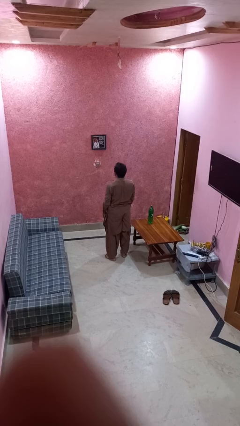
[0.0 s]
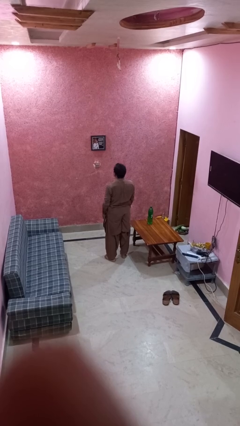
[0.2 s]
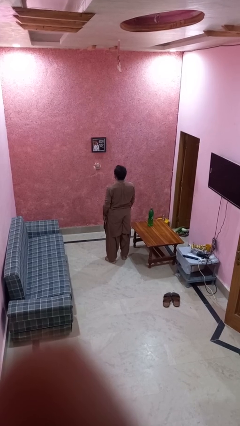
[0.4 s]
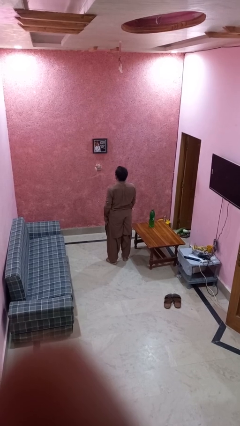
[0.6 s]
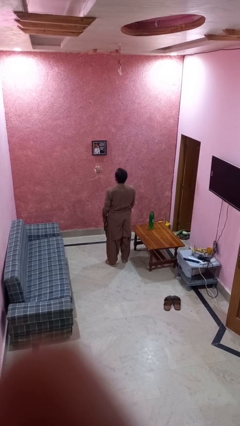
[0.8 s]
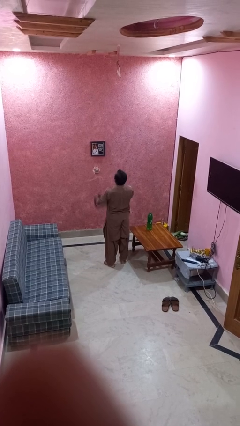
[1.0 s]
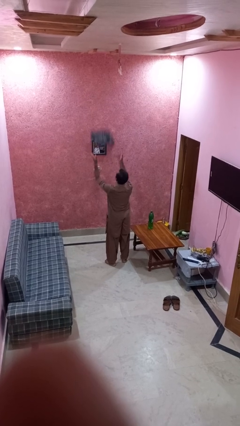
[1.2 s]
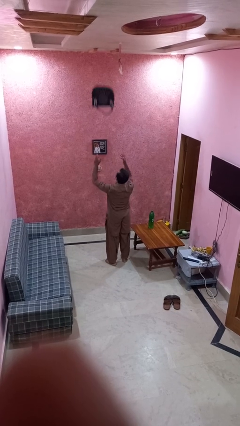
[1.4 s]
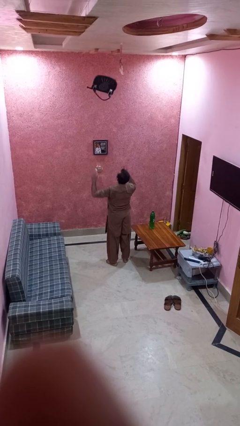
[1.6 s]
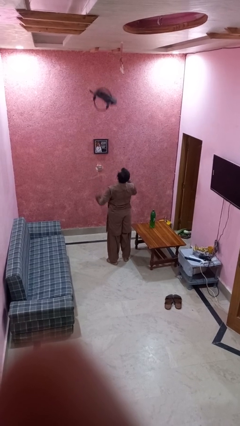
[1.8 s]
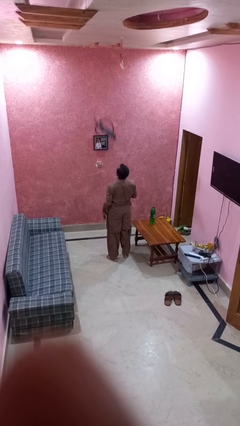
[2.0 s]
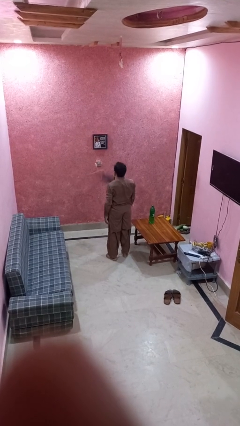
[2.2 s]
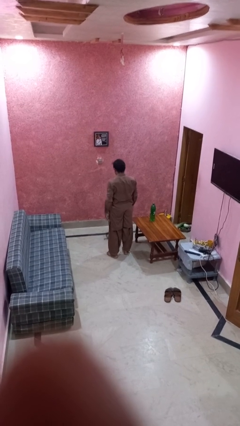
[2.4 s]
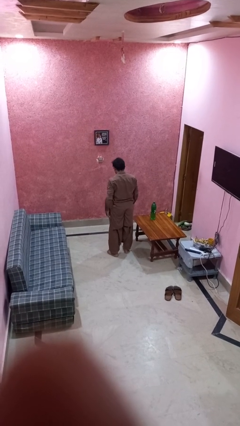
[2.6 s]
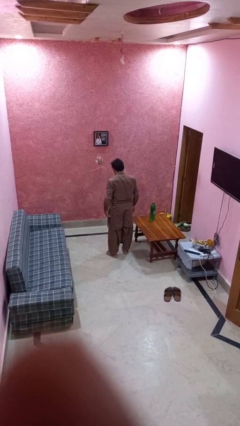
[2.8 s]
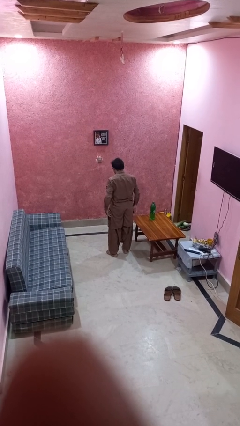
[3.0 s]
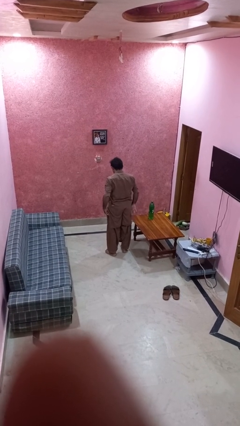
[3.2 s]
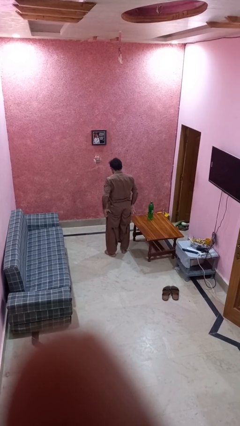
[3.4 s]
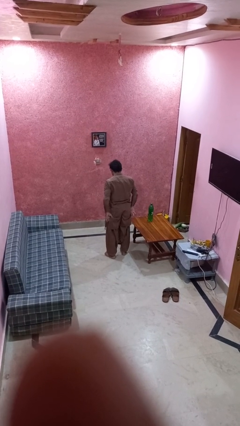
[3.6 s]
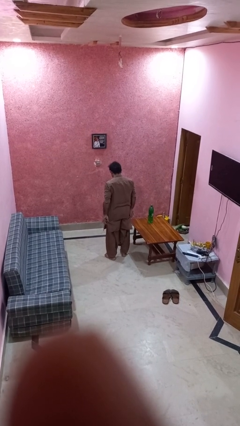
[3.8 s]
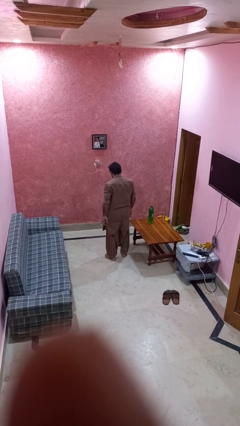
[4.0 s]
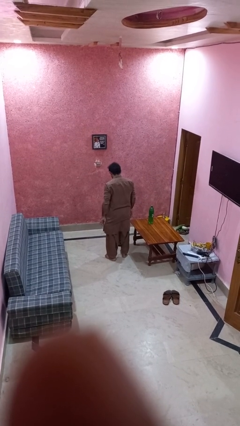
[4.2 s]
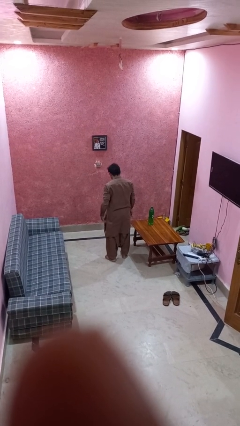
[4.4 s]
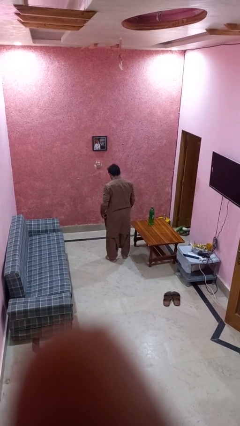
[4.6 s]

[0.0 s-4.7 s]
person throws object into air

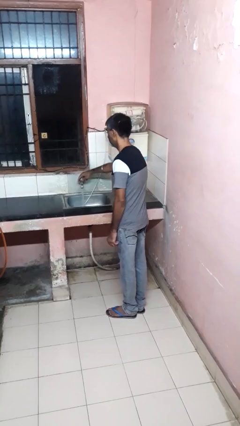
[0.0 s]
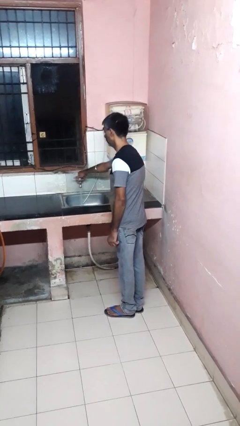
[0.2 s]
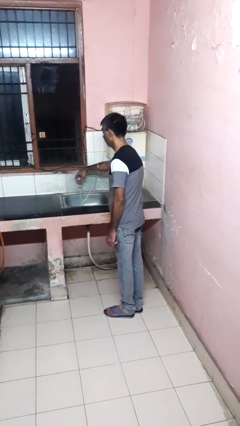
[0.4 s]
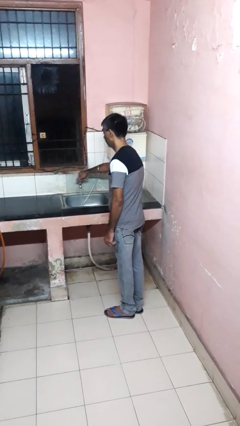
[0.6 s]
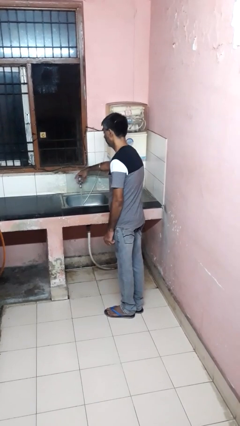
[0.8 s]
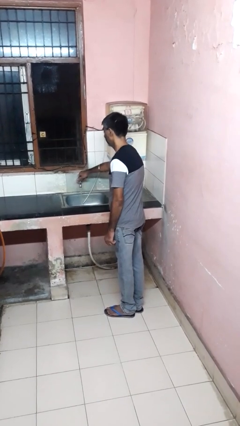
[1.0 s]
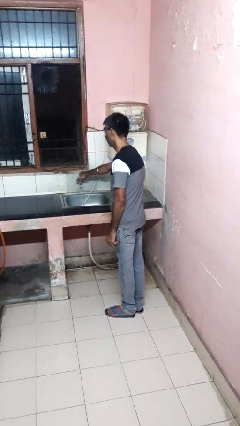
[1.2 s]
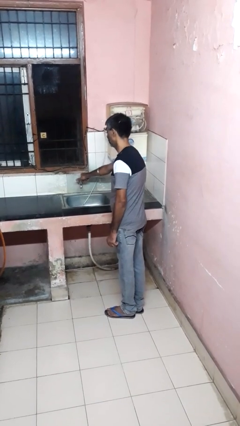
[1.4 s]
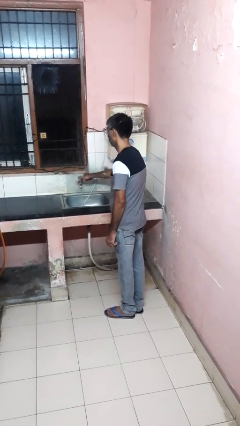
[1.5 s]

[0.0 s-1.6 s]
person turns off faucet

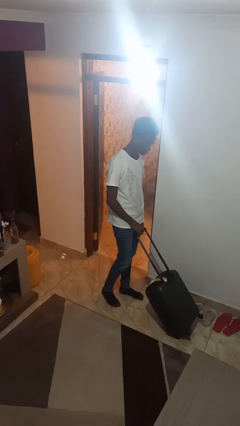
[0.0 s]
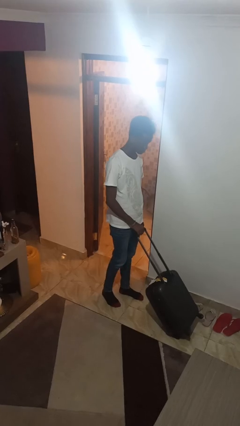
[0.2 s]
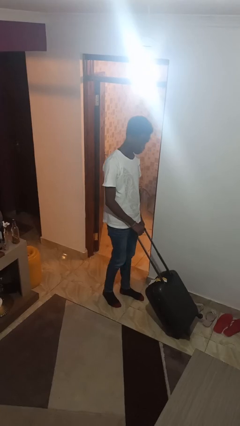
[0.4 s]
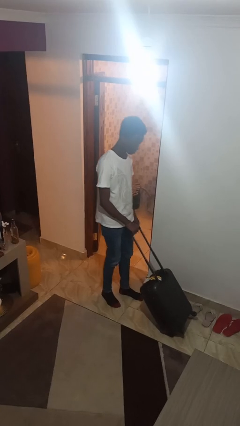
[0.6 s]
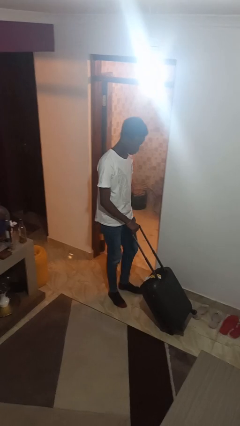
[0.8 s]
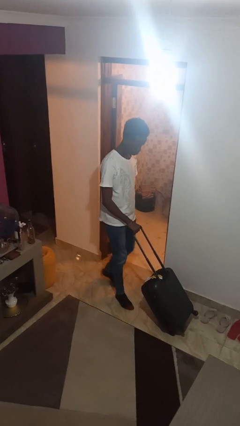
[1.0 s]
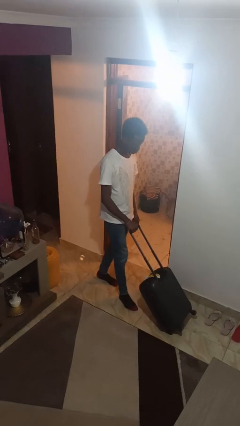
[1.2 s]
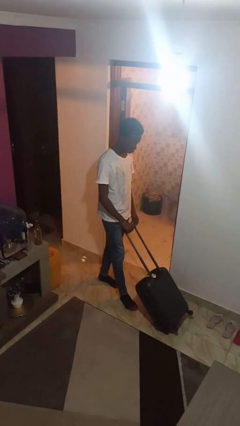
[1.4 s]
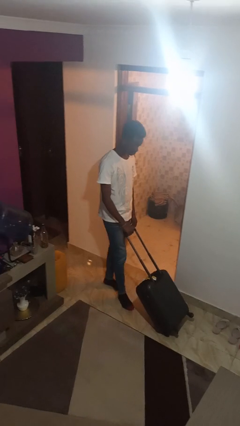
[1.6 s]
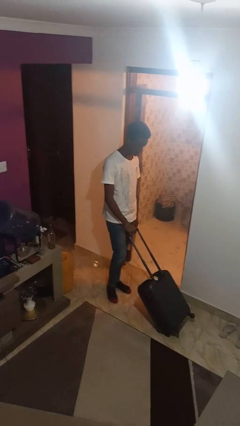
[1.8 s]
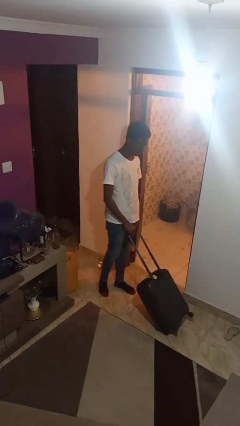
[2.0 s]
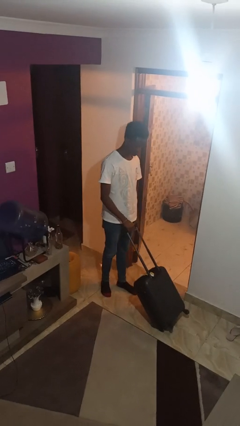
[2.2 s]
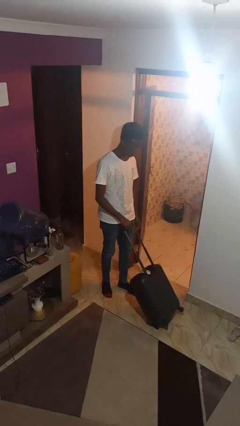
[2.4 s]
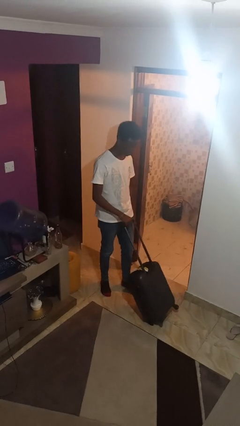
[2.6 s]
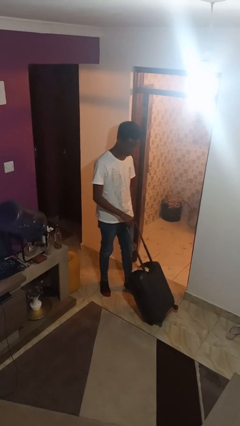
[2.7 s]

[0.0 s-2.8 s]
person pulls wheeled cart

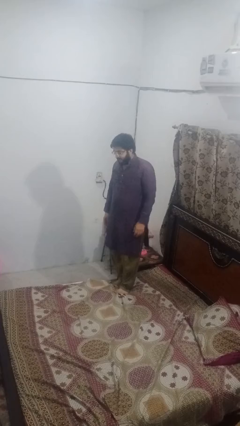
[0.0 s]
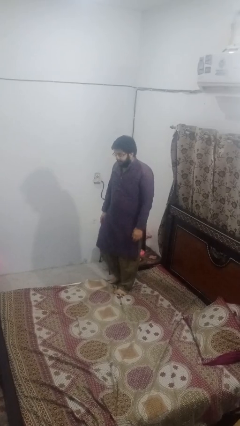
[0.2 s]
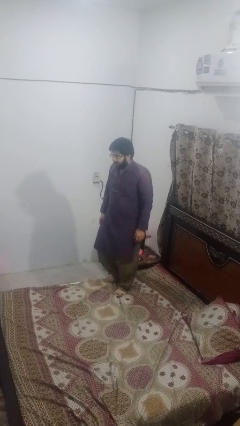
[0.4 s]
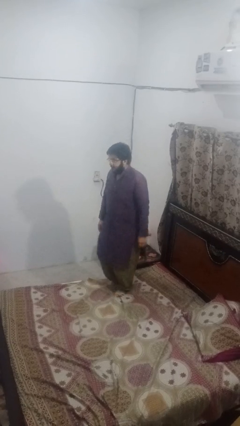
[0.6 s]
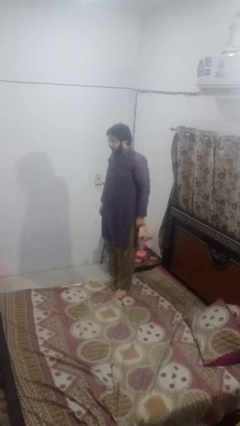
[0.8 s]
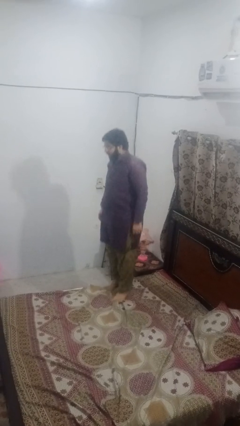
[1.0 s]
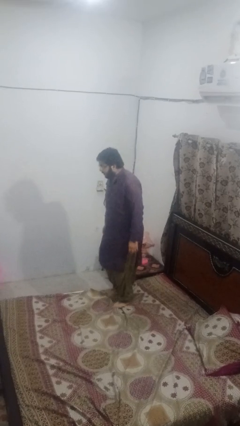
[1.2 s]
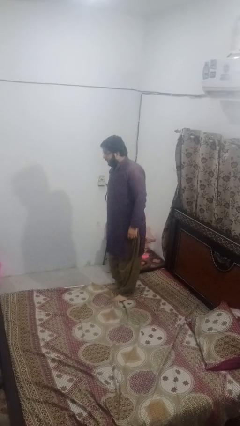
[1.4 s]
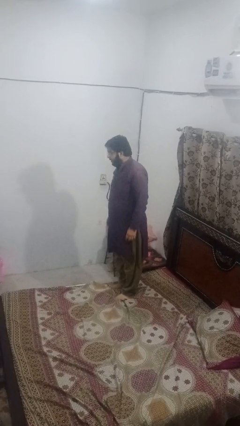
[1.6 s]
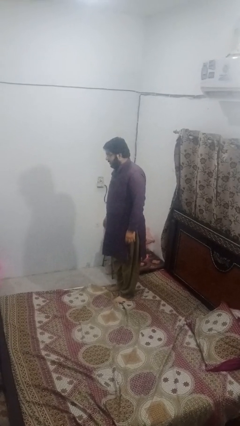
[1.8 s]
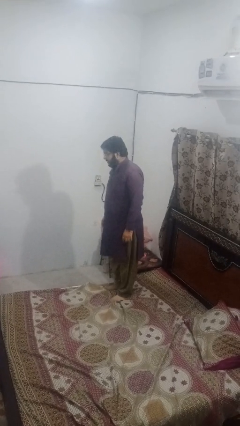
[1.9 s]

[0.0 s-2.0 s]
person jumps on bed

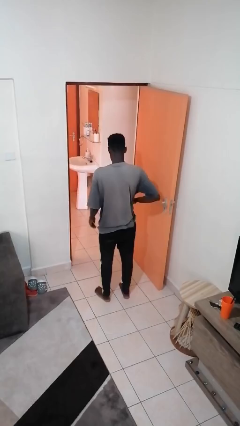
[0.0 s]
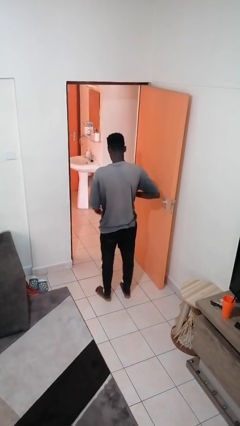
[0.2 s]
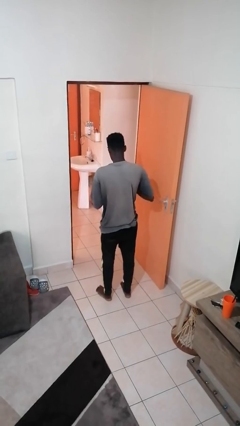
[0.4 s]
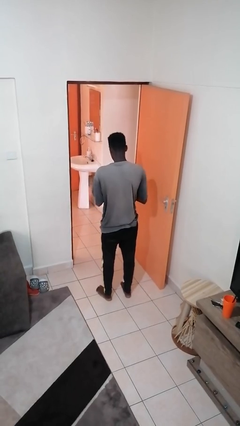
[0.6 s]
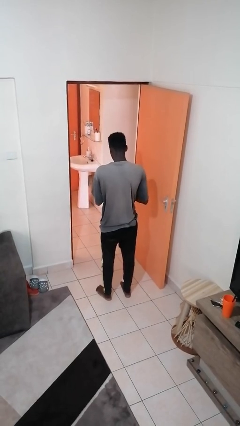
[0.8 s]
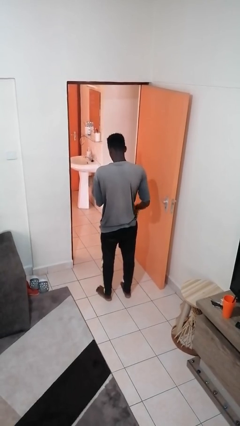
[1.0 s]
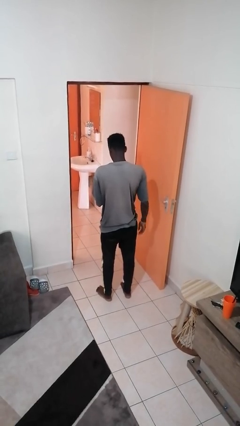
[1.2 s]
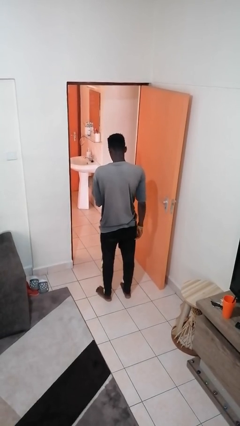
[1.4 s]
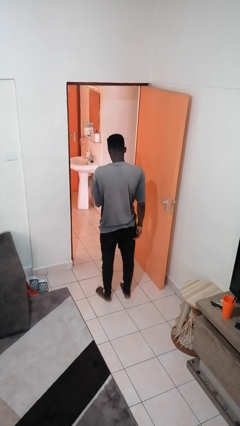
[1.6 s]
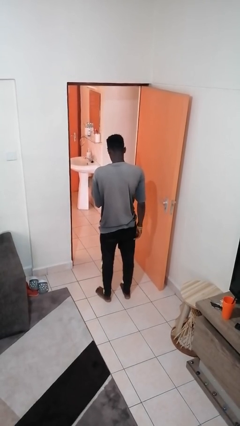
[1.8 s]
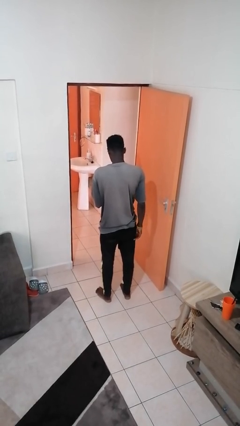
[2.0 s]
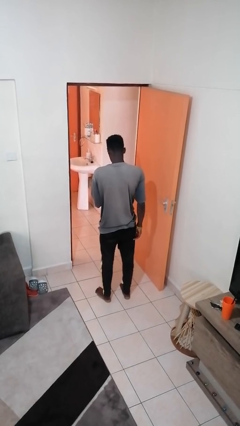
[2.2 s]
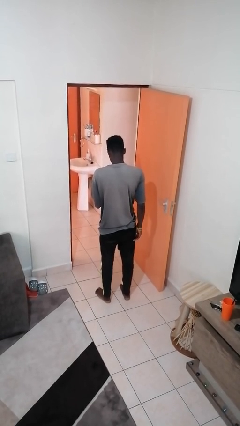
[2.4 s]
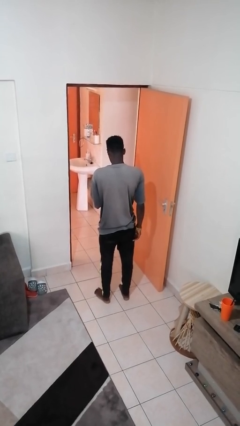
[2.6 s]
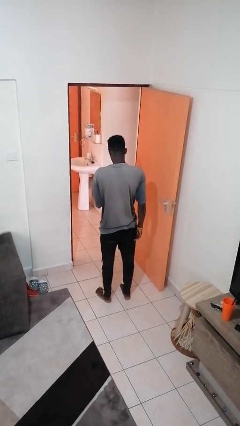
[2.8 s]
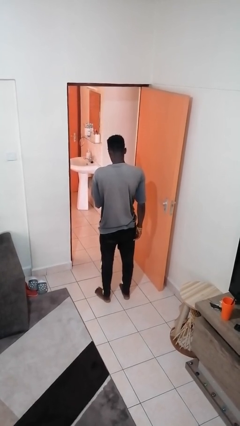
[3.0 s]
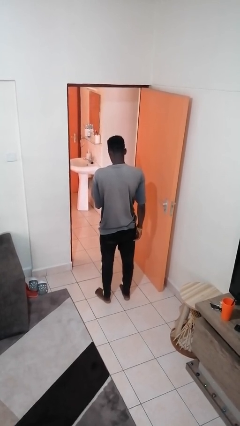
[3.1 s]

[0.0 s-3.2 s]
person takes phone from pocket

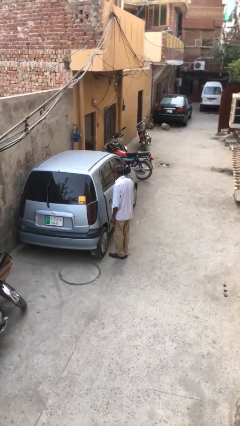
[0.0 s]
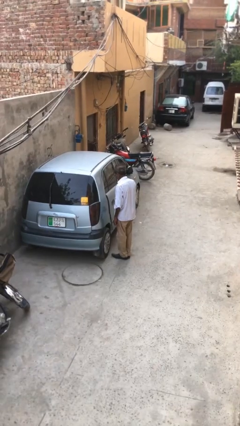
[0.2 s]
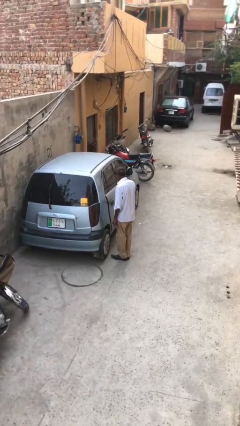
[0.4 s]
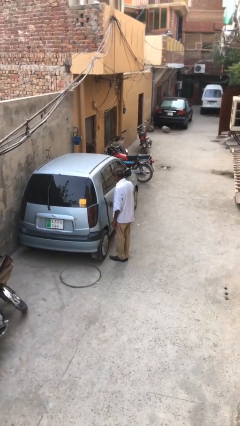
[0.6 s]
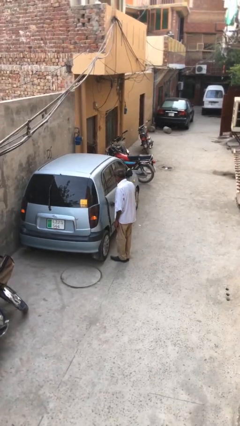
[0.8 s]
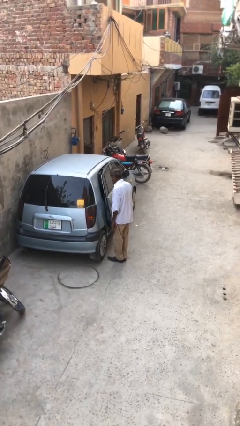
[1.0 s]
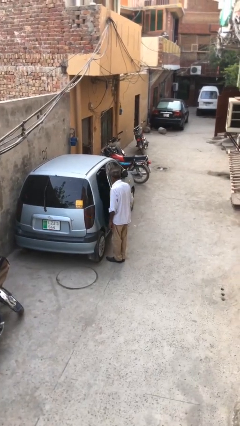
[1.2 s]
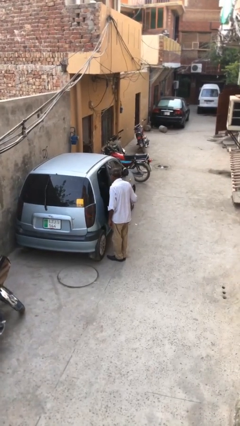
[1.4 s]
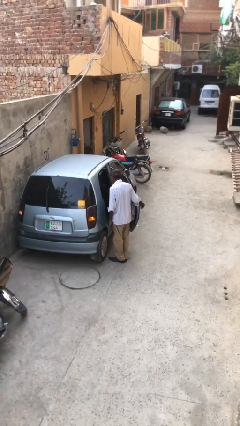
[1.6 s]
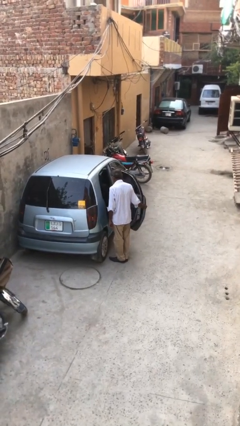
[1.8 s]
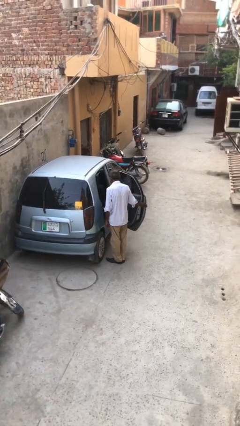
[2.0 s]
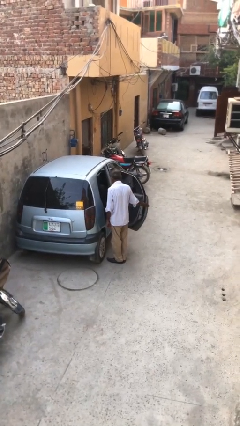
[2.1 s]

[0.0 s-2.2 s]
person opens car door

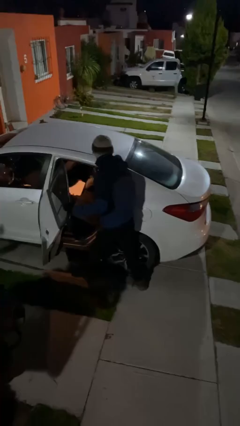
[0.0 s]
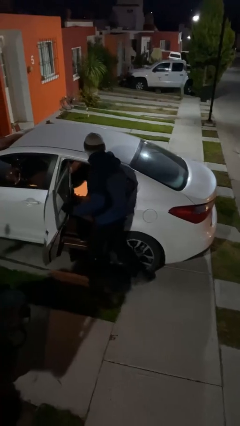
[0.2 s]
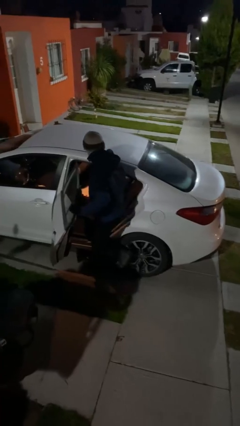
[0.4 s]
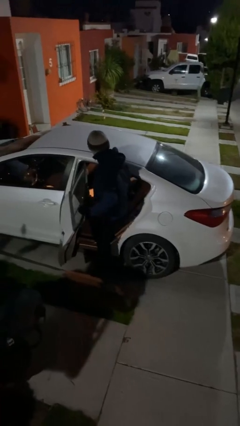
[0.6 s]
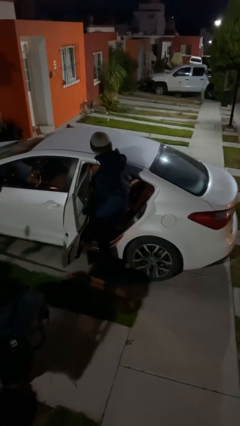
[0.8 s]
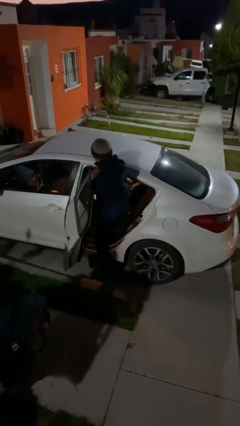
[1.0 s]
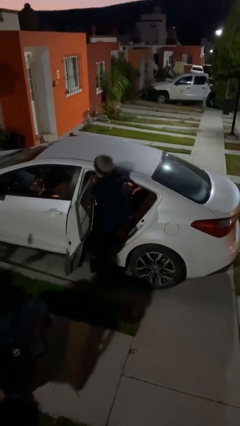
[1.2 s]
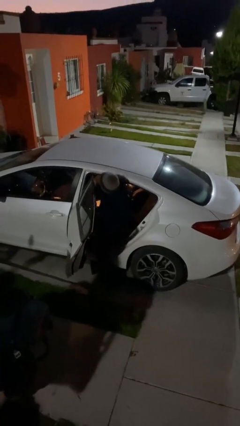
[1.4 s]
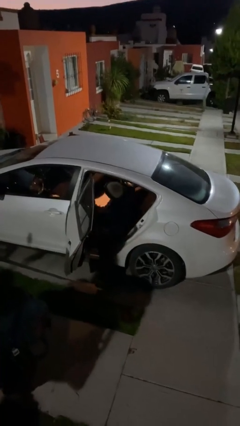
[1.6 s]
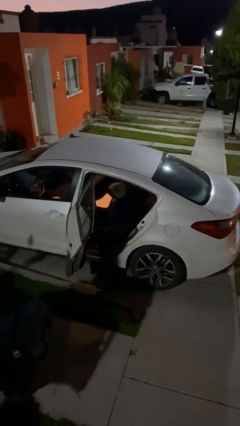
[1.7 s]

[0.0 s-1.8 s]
person enters car
